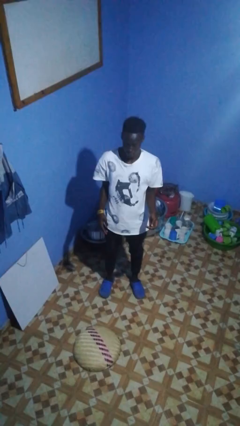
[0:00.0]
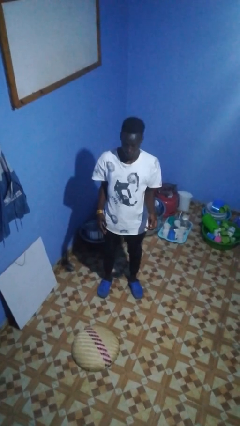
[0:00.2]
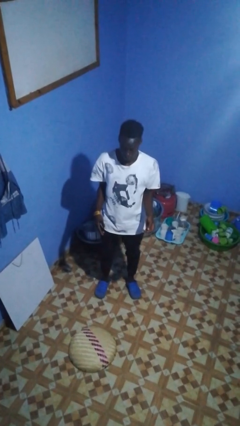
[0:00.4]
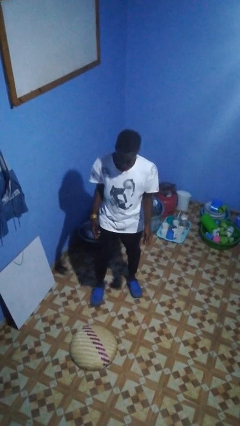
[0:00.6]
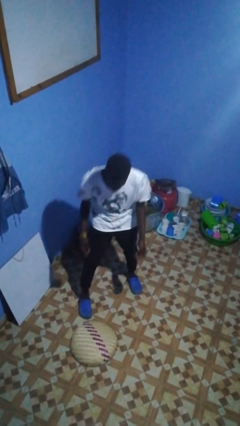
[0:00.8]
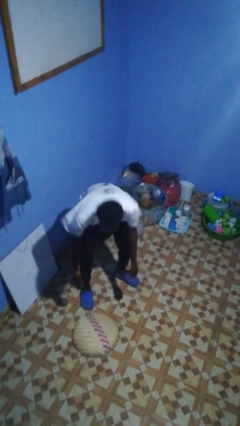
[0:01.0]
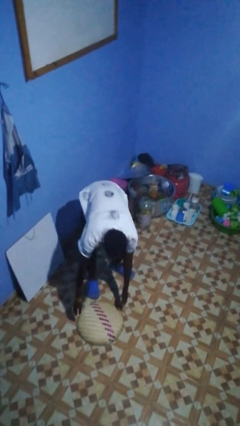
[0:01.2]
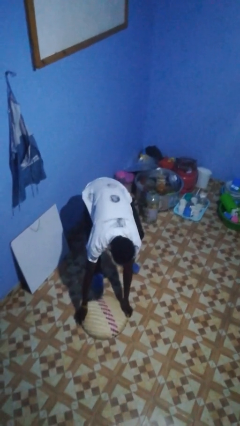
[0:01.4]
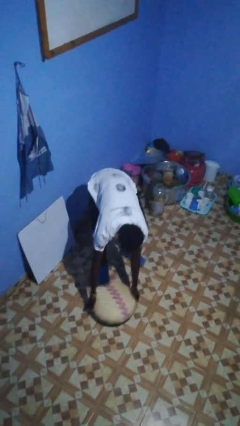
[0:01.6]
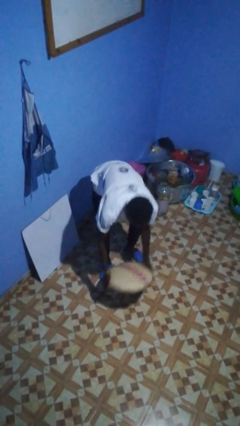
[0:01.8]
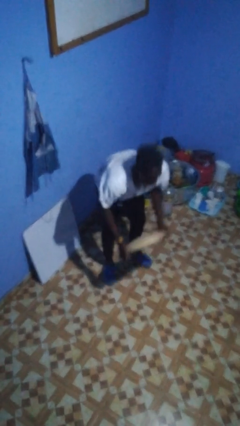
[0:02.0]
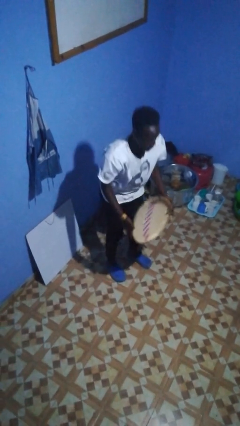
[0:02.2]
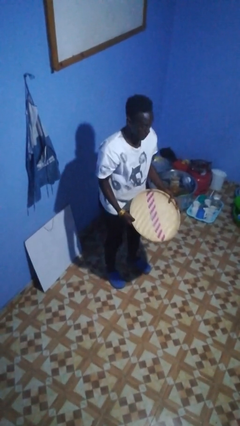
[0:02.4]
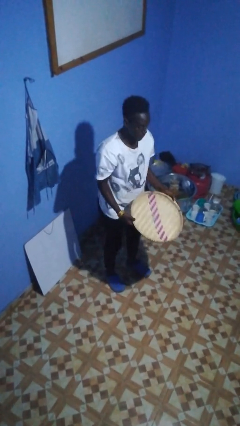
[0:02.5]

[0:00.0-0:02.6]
person picks up object from floor

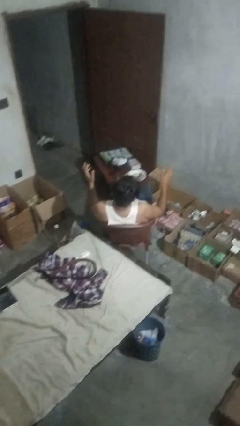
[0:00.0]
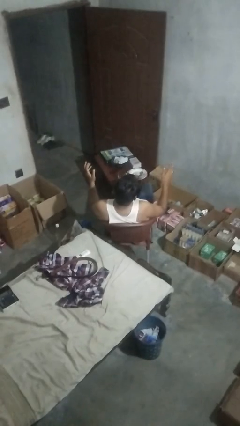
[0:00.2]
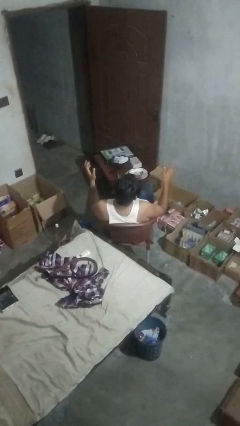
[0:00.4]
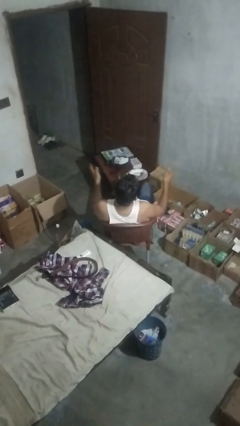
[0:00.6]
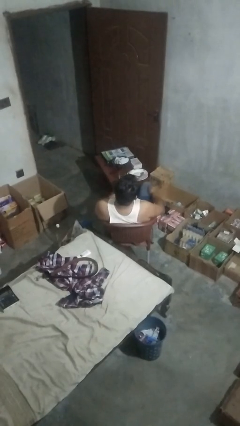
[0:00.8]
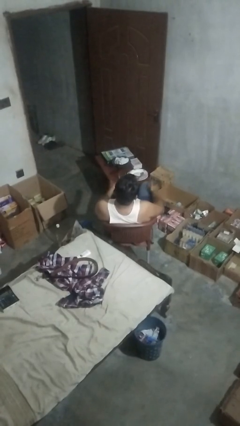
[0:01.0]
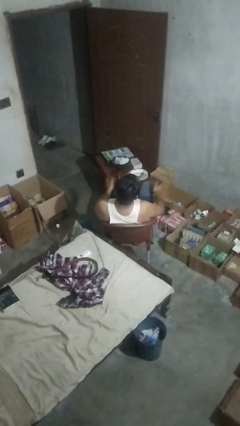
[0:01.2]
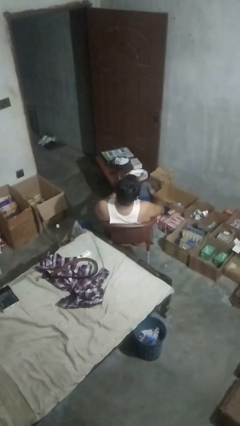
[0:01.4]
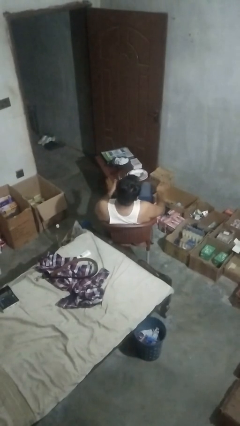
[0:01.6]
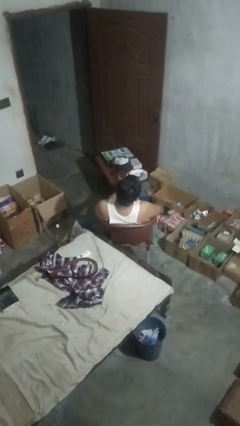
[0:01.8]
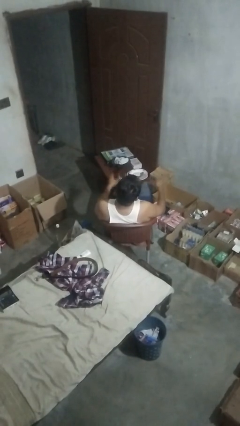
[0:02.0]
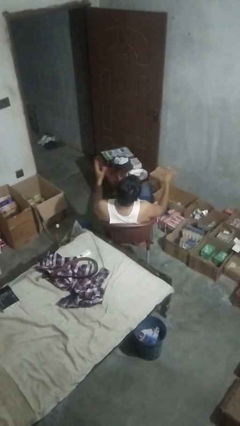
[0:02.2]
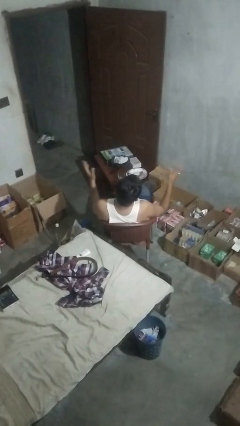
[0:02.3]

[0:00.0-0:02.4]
person slaps hands on thighs

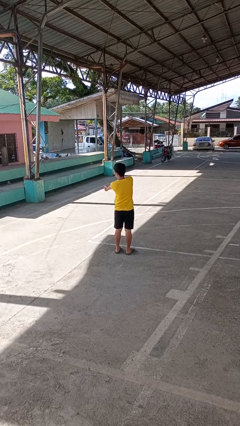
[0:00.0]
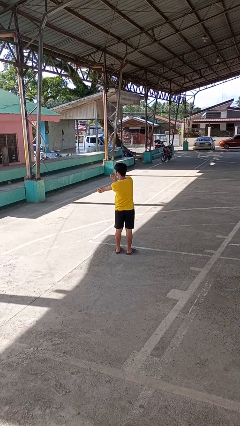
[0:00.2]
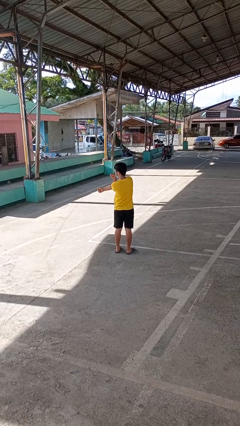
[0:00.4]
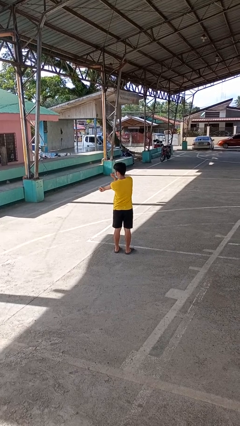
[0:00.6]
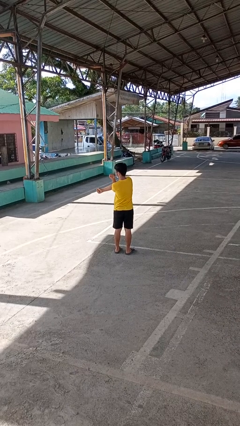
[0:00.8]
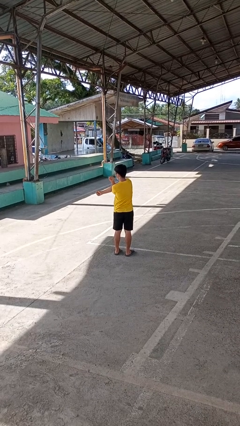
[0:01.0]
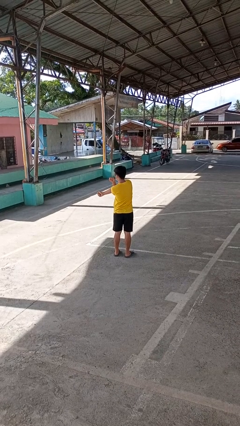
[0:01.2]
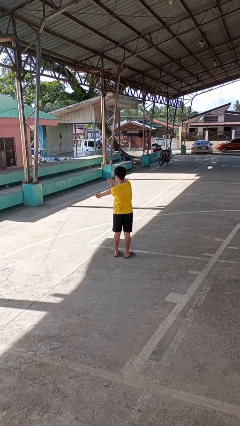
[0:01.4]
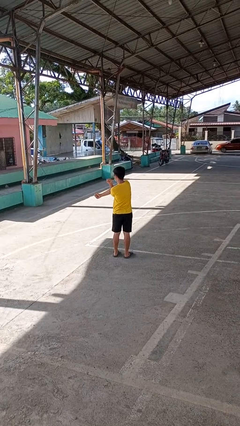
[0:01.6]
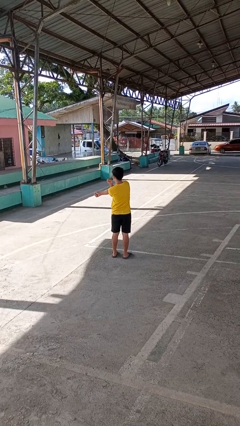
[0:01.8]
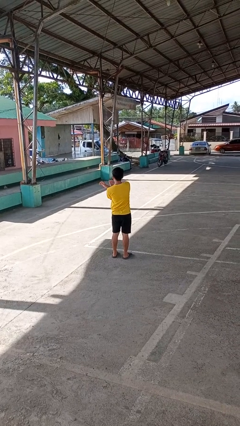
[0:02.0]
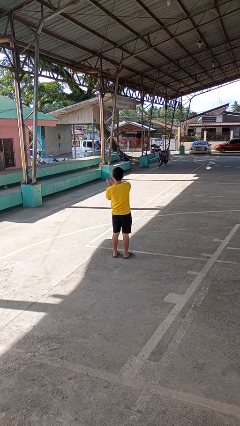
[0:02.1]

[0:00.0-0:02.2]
person stretches arms to side

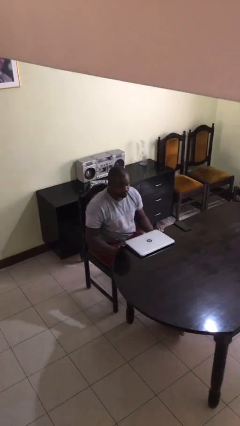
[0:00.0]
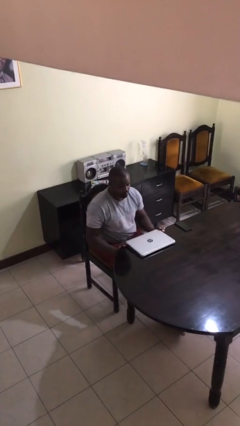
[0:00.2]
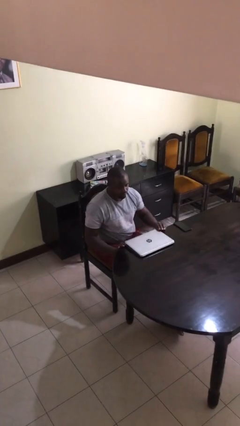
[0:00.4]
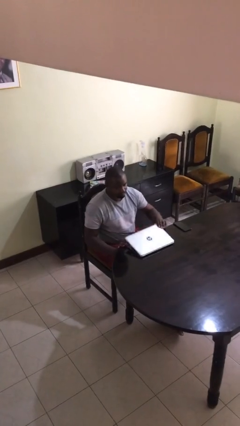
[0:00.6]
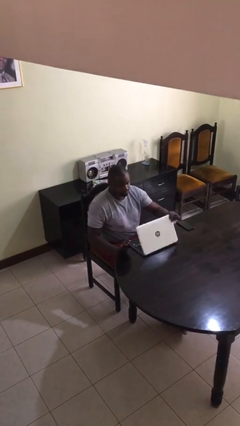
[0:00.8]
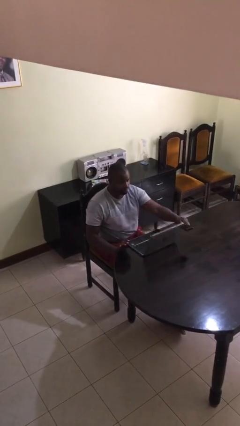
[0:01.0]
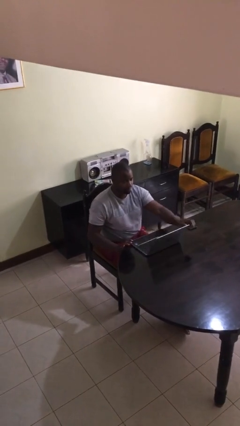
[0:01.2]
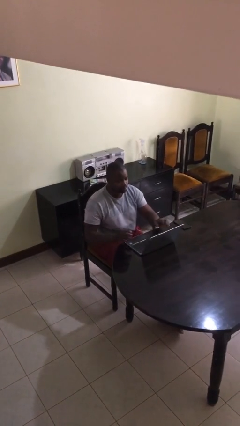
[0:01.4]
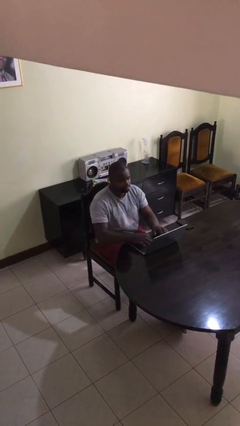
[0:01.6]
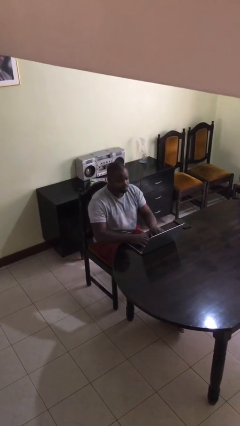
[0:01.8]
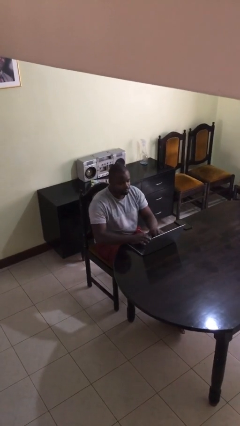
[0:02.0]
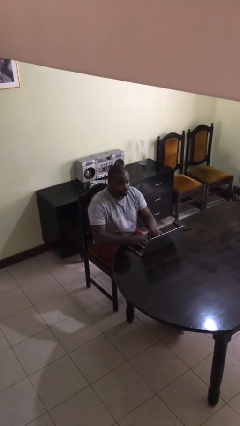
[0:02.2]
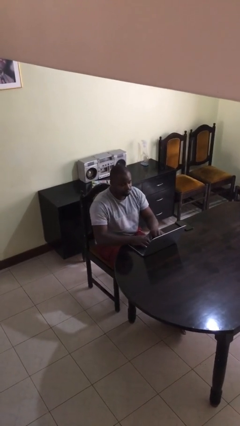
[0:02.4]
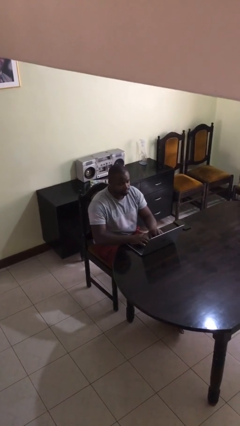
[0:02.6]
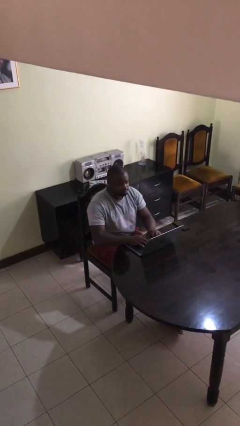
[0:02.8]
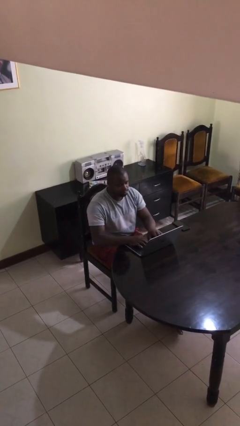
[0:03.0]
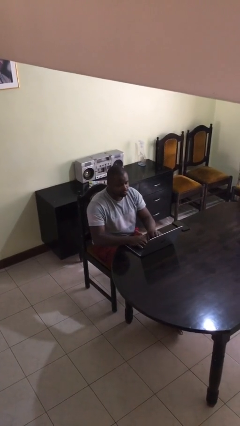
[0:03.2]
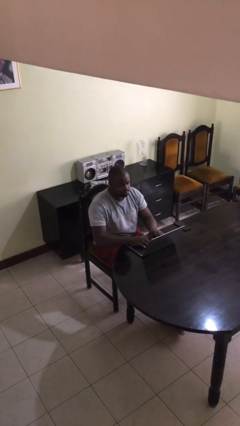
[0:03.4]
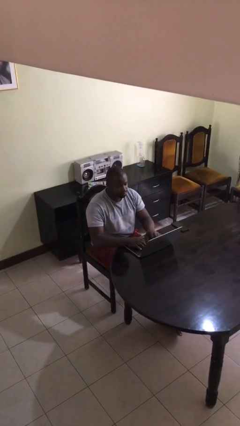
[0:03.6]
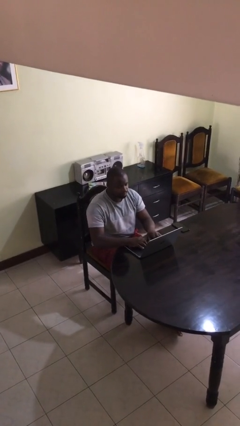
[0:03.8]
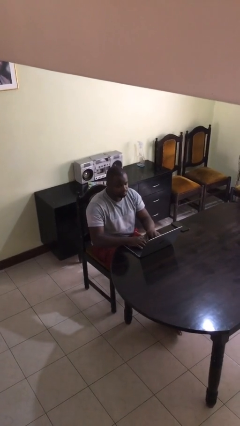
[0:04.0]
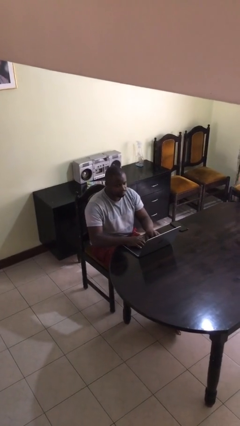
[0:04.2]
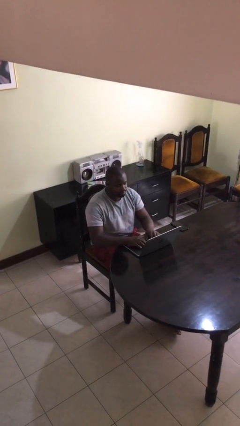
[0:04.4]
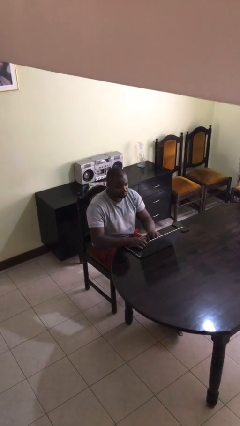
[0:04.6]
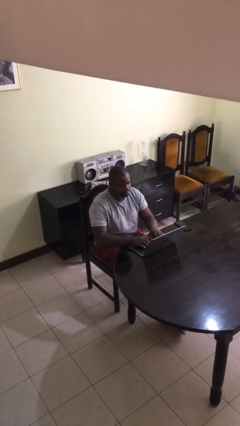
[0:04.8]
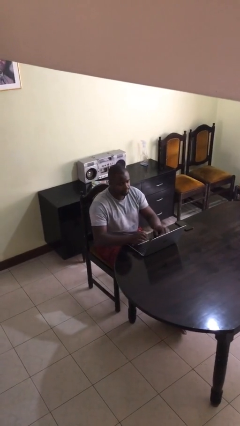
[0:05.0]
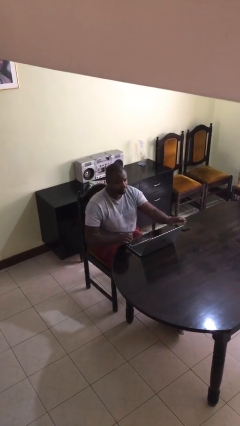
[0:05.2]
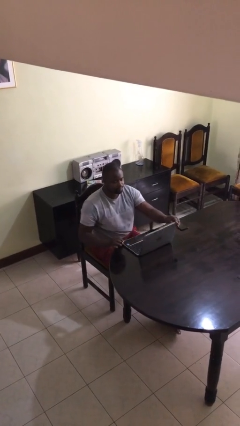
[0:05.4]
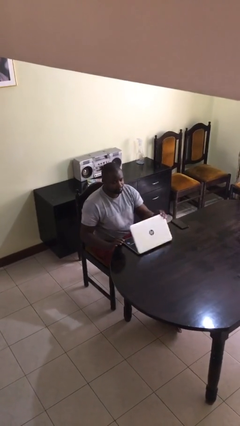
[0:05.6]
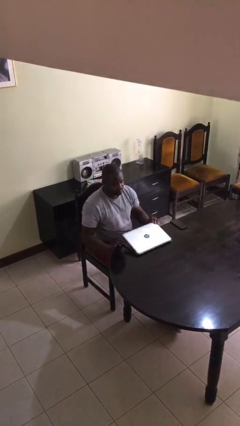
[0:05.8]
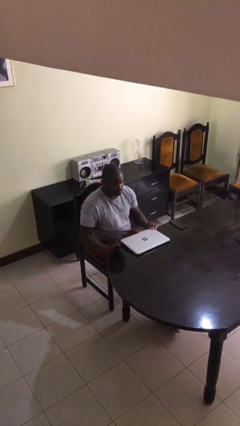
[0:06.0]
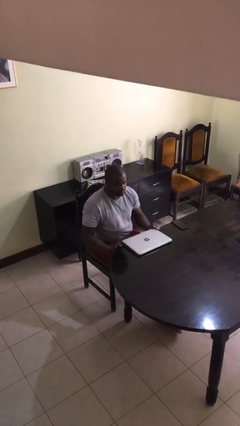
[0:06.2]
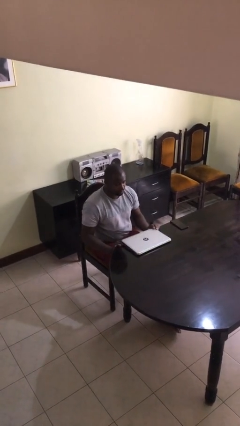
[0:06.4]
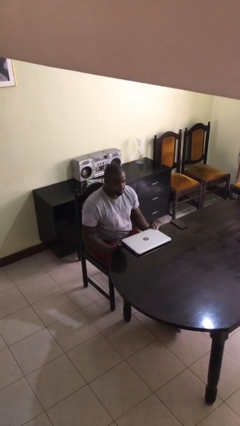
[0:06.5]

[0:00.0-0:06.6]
person interacts with laptop

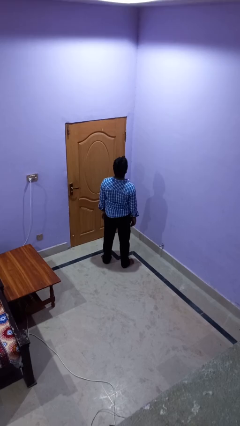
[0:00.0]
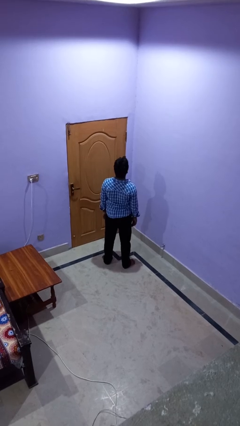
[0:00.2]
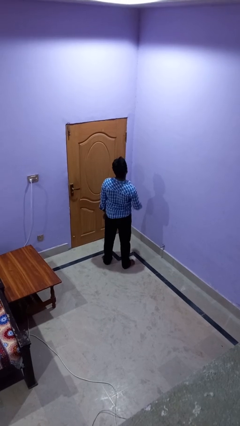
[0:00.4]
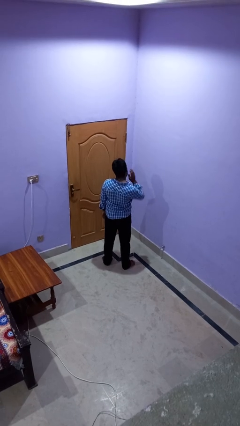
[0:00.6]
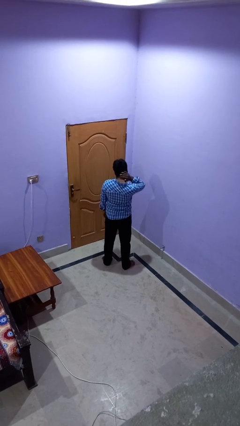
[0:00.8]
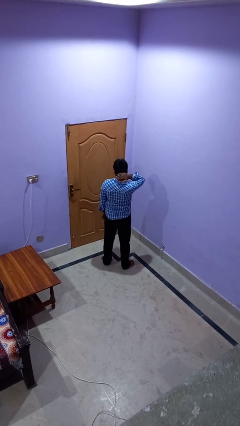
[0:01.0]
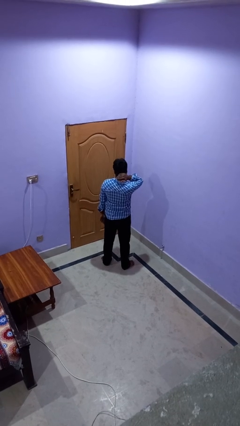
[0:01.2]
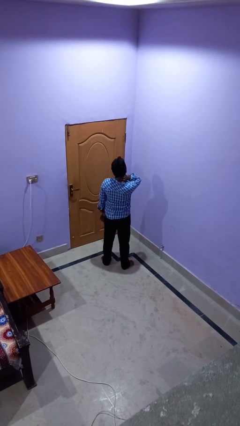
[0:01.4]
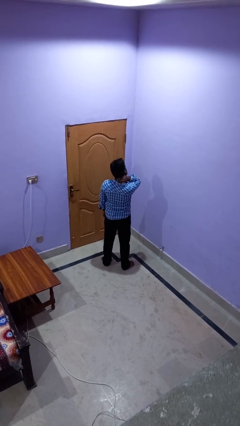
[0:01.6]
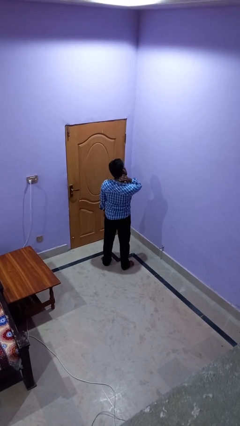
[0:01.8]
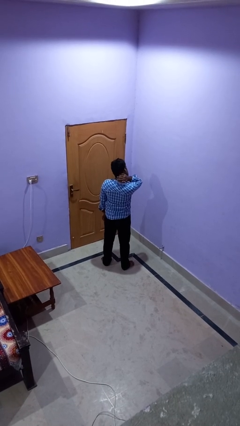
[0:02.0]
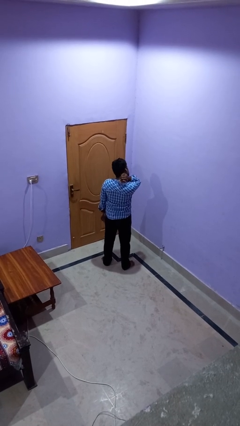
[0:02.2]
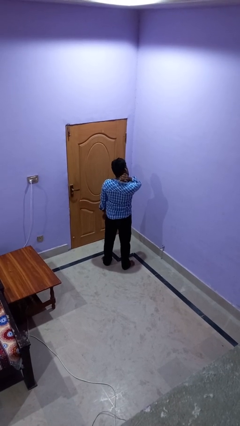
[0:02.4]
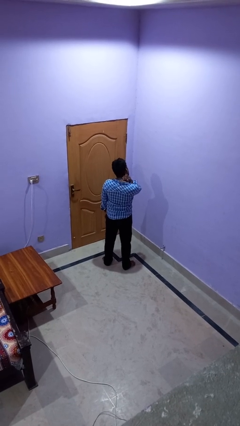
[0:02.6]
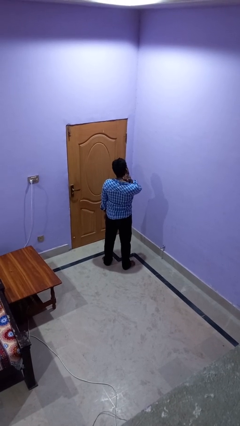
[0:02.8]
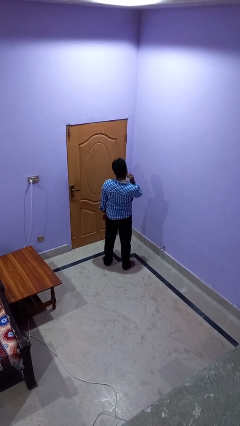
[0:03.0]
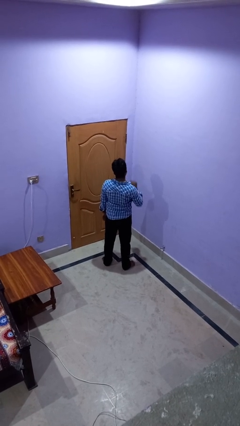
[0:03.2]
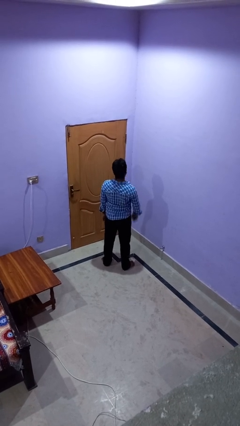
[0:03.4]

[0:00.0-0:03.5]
person rubs neck

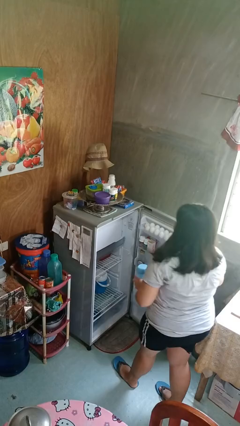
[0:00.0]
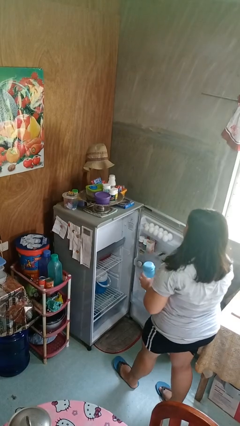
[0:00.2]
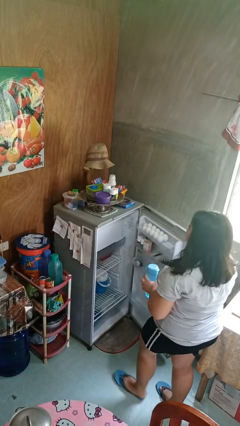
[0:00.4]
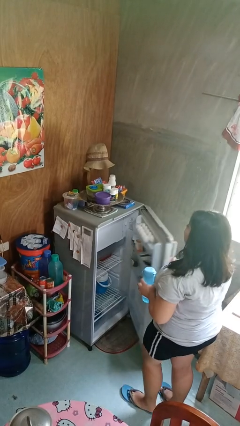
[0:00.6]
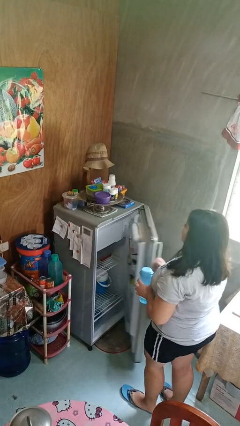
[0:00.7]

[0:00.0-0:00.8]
person closes refrigerator
